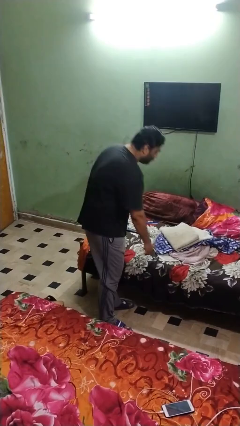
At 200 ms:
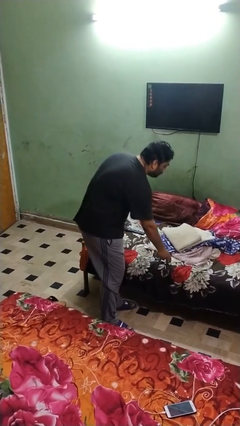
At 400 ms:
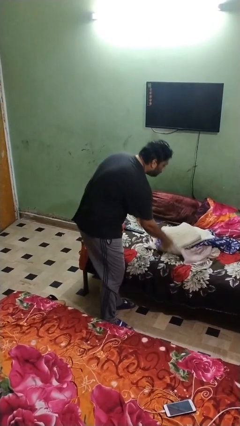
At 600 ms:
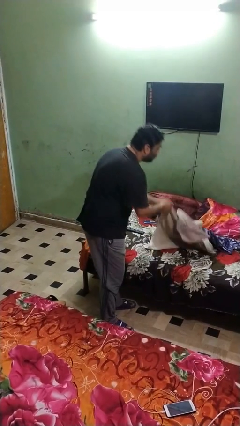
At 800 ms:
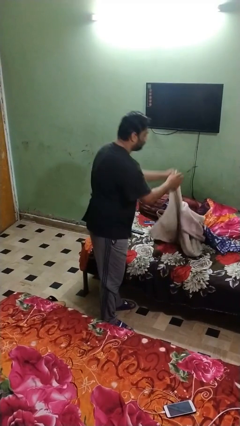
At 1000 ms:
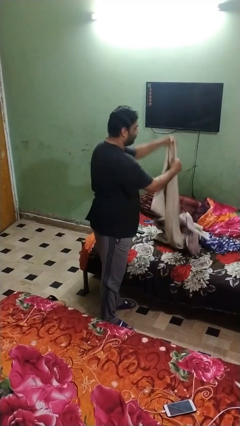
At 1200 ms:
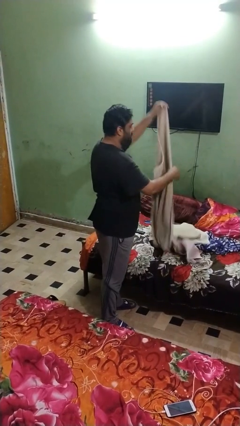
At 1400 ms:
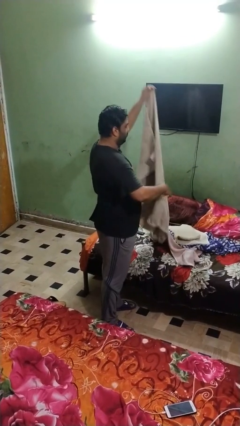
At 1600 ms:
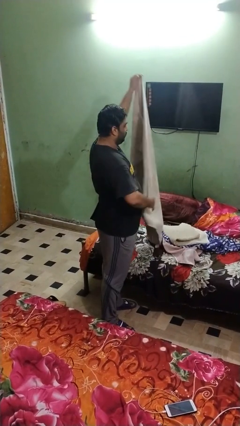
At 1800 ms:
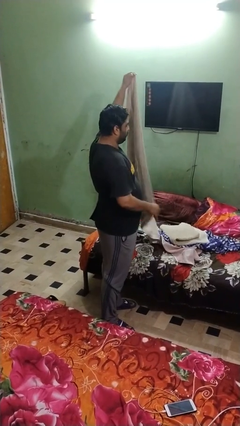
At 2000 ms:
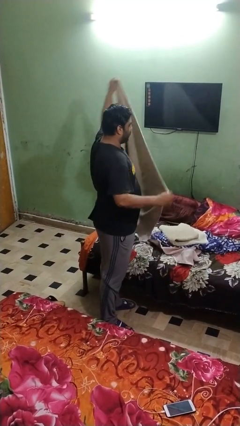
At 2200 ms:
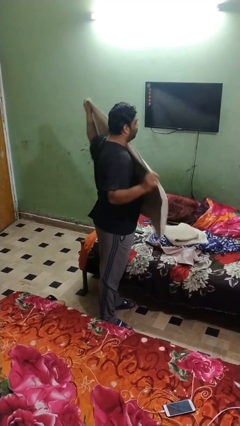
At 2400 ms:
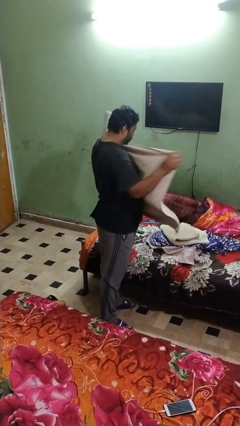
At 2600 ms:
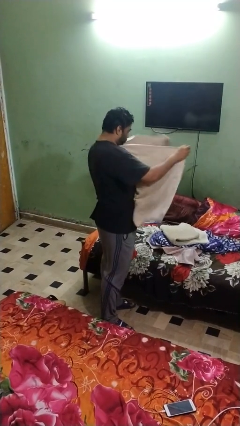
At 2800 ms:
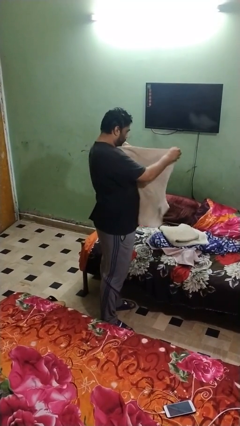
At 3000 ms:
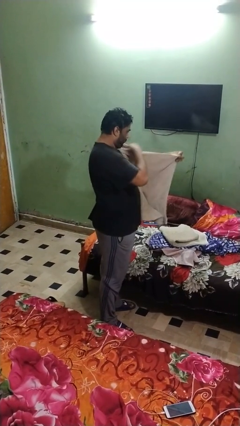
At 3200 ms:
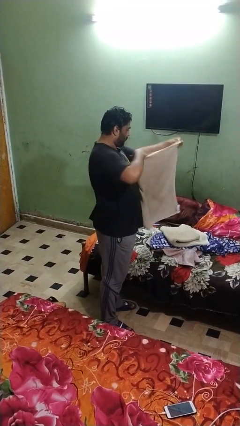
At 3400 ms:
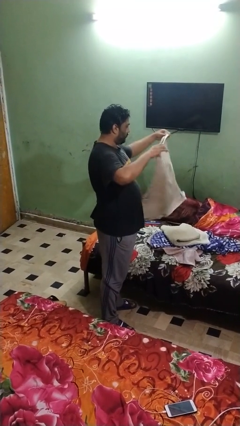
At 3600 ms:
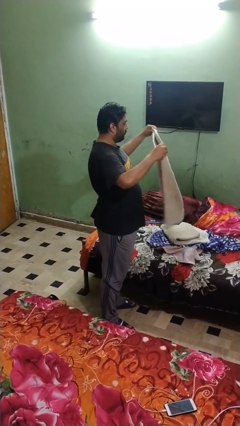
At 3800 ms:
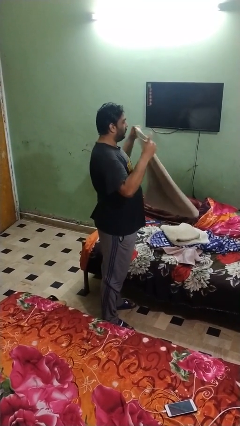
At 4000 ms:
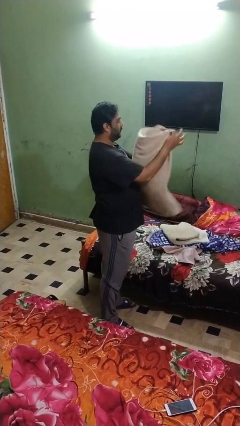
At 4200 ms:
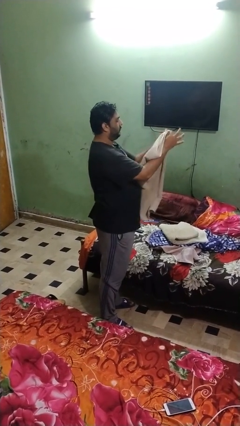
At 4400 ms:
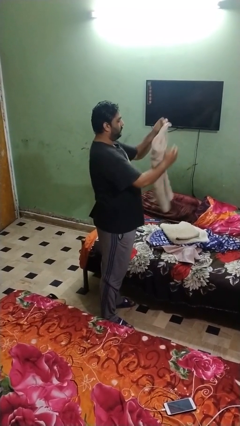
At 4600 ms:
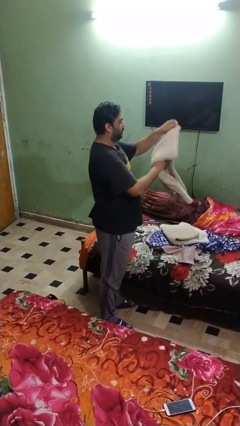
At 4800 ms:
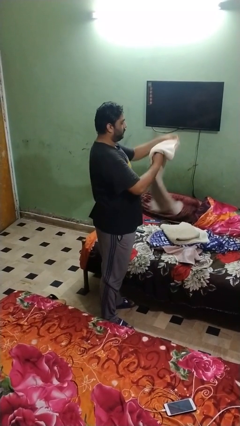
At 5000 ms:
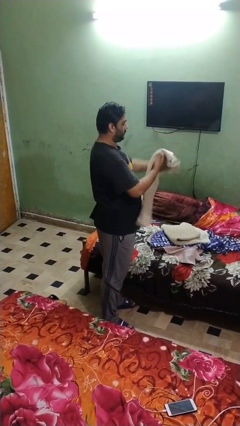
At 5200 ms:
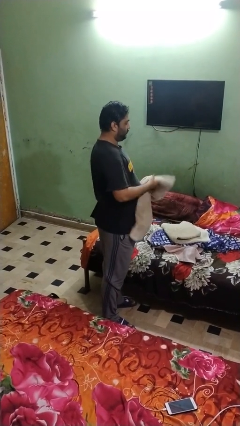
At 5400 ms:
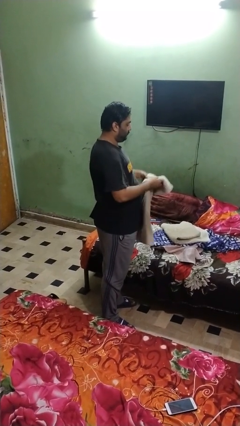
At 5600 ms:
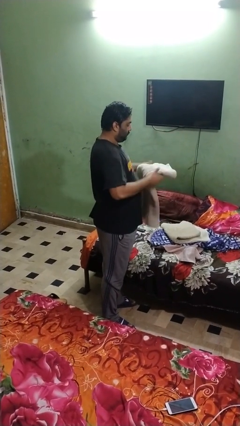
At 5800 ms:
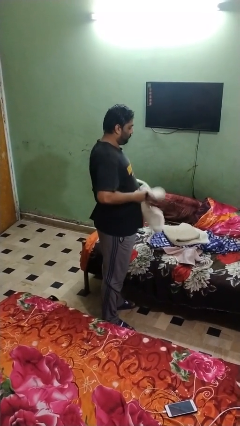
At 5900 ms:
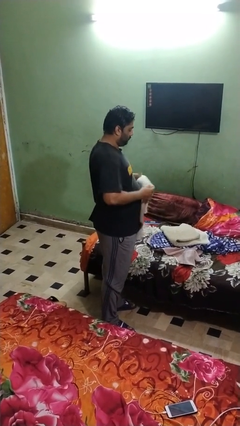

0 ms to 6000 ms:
person folds towel

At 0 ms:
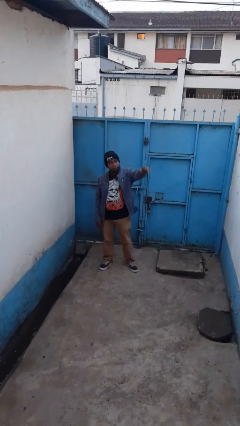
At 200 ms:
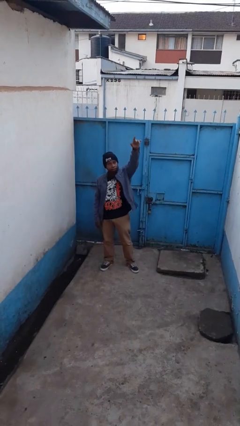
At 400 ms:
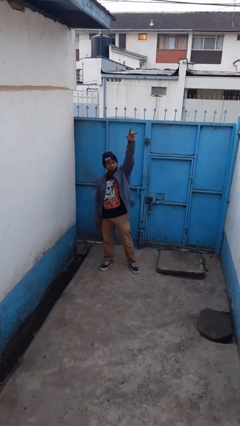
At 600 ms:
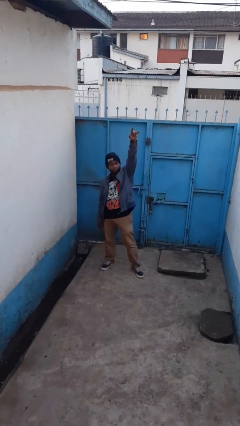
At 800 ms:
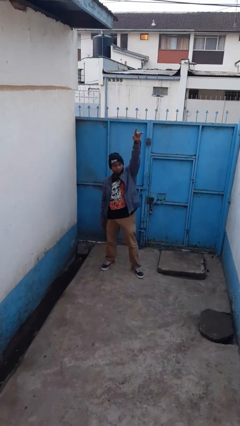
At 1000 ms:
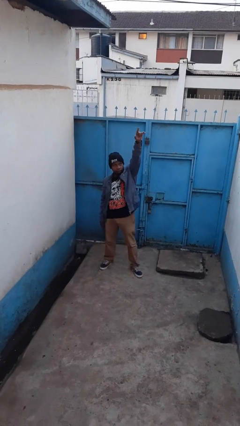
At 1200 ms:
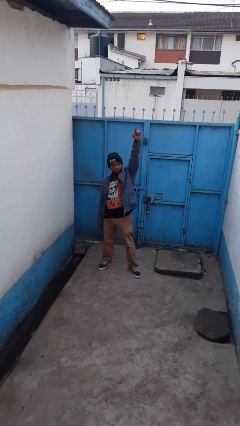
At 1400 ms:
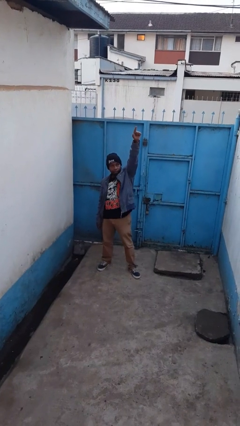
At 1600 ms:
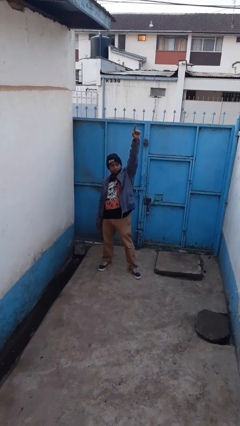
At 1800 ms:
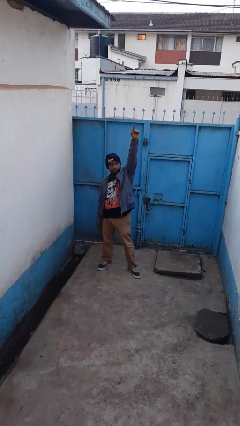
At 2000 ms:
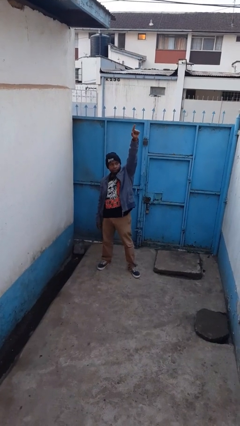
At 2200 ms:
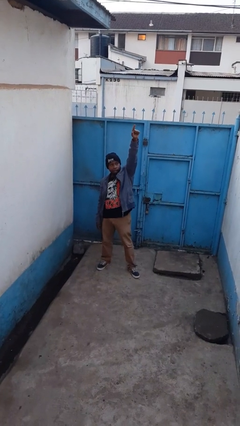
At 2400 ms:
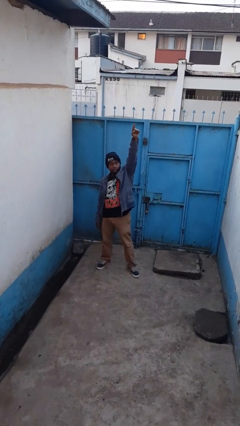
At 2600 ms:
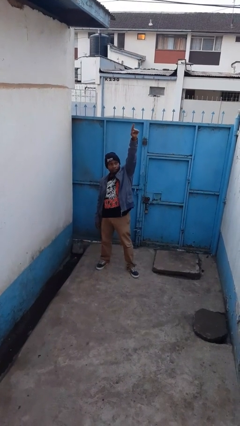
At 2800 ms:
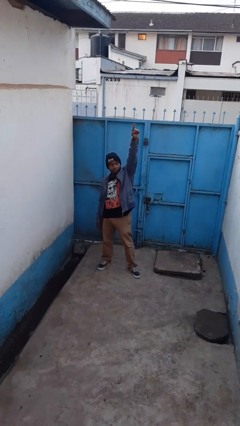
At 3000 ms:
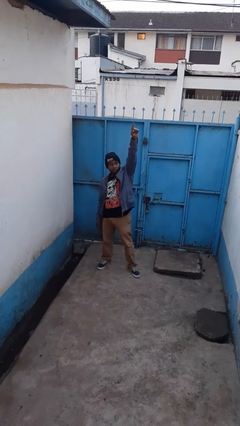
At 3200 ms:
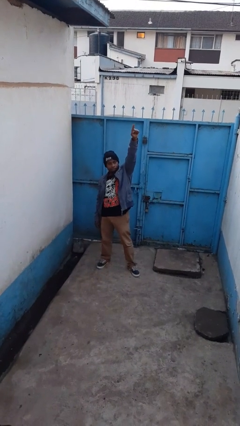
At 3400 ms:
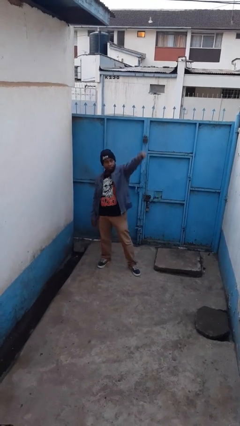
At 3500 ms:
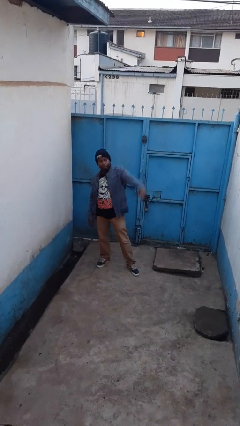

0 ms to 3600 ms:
person points at person

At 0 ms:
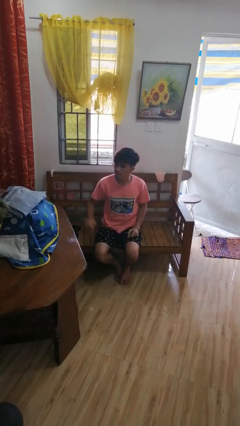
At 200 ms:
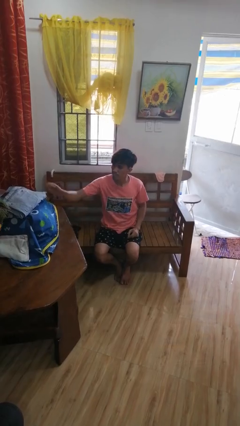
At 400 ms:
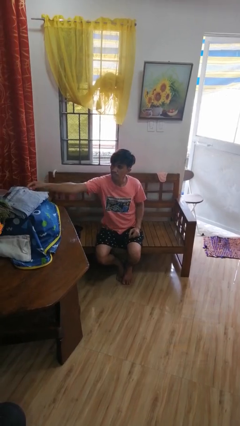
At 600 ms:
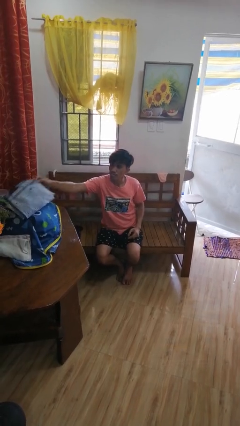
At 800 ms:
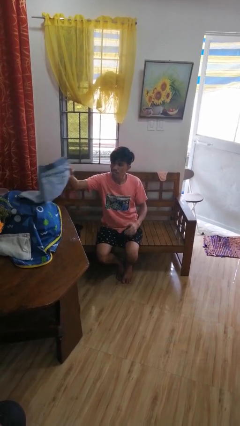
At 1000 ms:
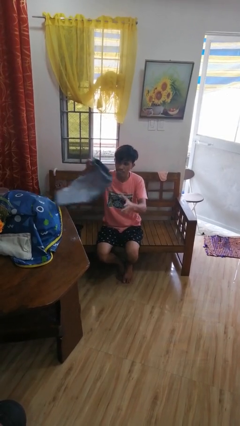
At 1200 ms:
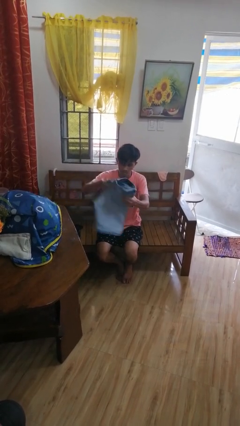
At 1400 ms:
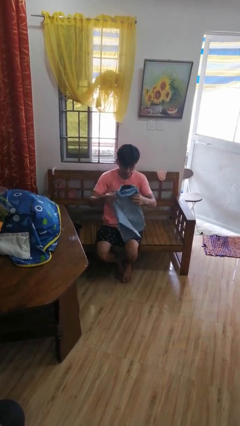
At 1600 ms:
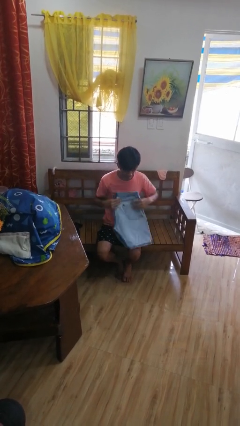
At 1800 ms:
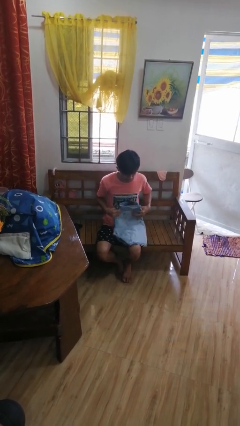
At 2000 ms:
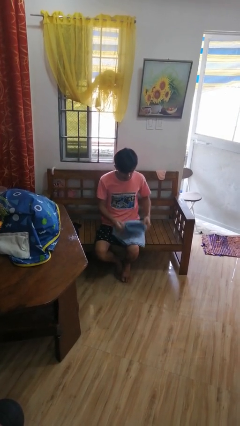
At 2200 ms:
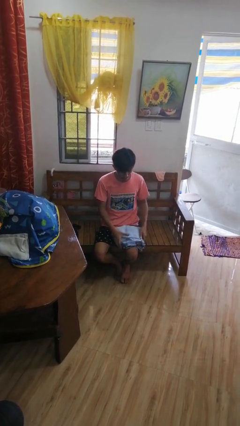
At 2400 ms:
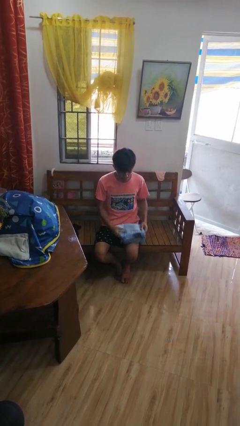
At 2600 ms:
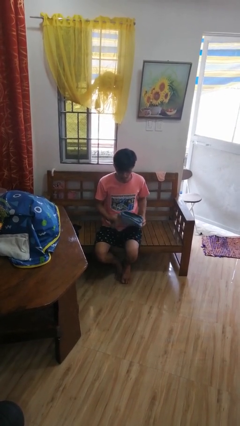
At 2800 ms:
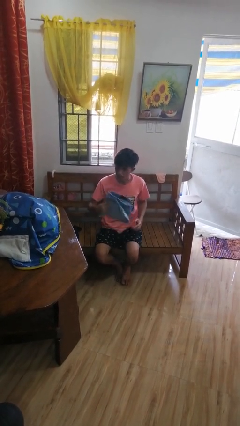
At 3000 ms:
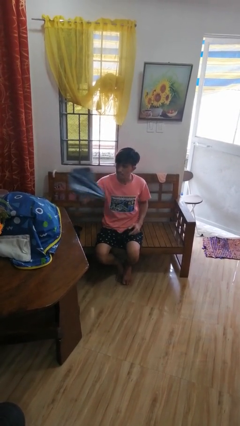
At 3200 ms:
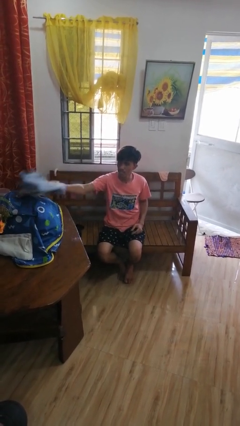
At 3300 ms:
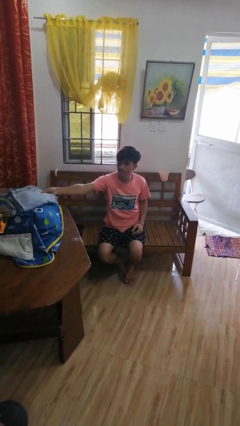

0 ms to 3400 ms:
person folds pants

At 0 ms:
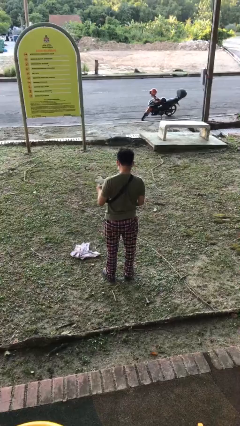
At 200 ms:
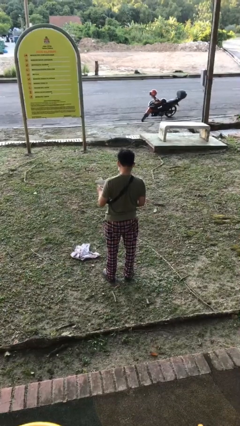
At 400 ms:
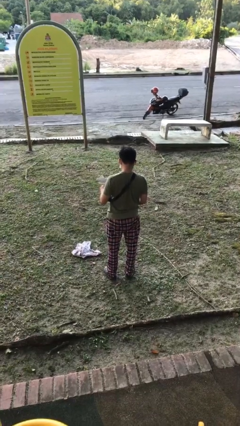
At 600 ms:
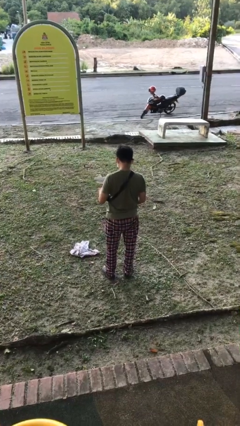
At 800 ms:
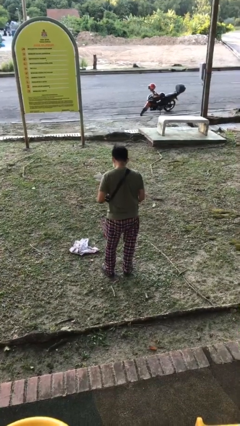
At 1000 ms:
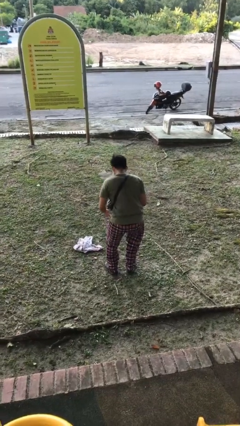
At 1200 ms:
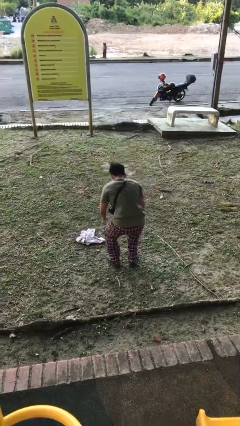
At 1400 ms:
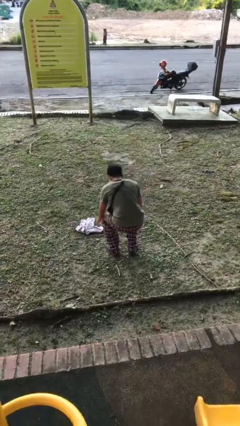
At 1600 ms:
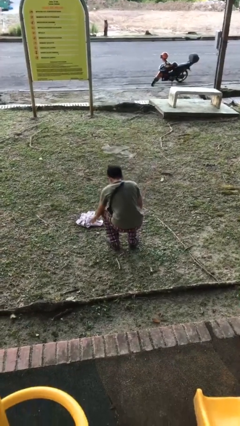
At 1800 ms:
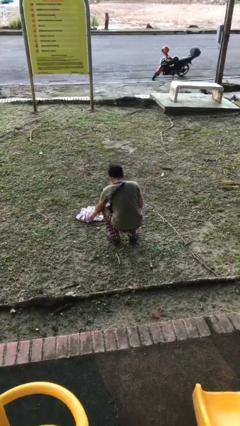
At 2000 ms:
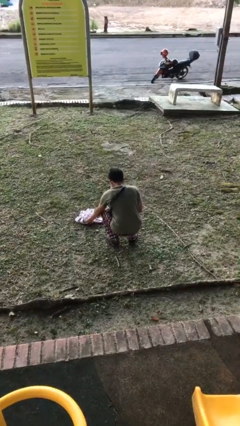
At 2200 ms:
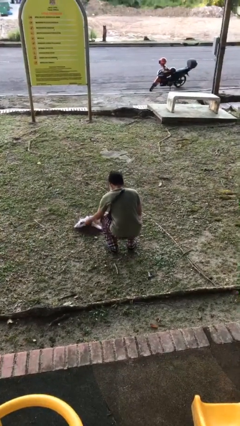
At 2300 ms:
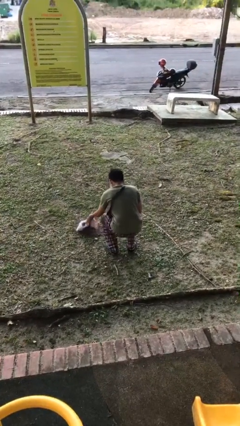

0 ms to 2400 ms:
person picks up object from floor

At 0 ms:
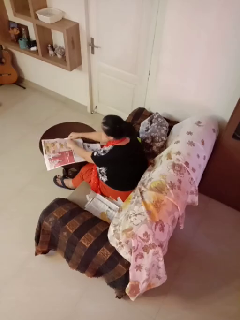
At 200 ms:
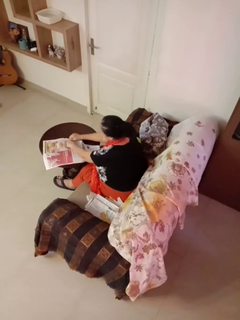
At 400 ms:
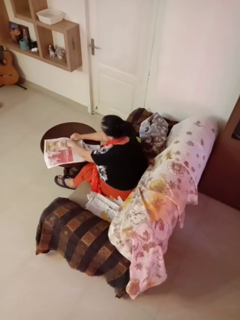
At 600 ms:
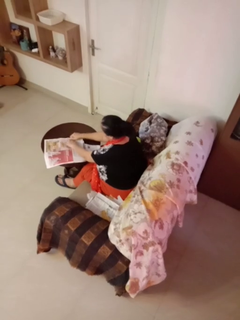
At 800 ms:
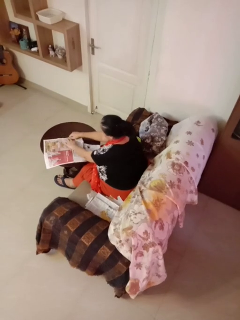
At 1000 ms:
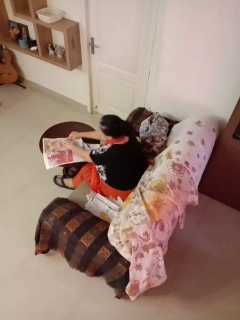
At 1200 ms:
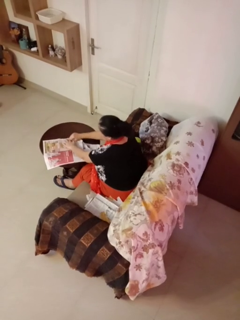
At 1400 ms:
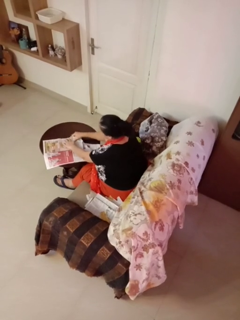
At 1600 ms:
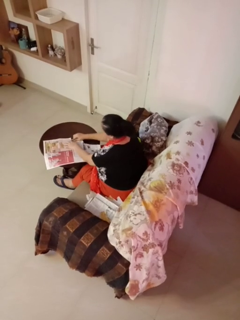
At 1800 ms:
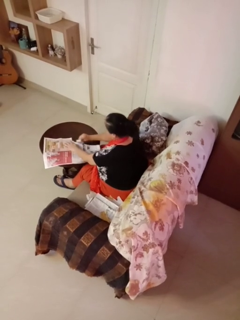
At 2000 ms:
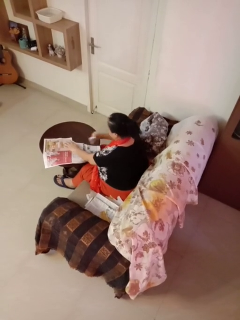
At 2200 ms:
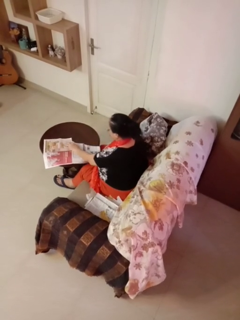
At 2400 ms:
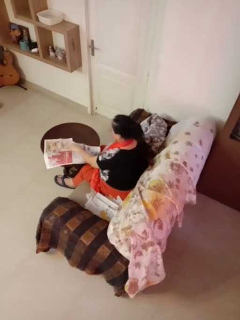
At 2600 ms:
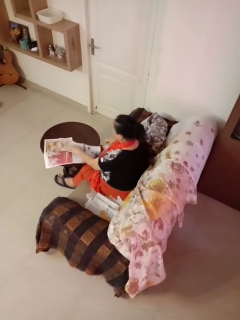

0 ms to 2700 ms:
person tears paper

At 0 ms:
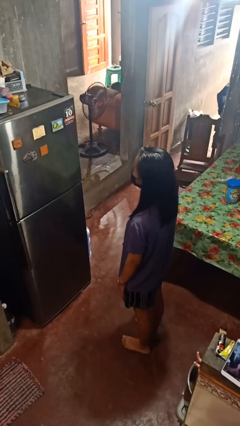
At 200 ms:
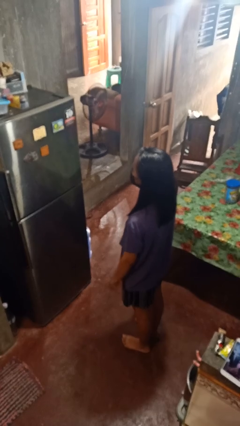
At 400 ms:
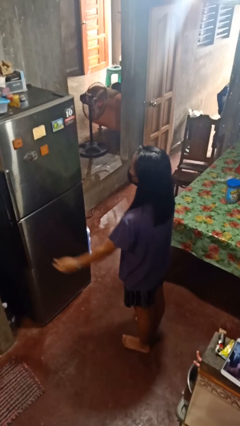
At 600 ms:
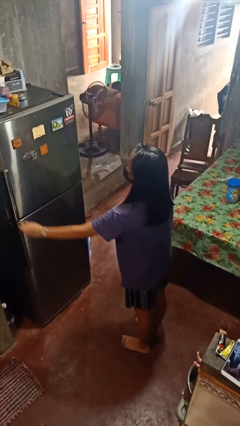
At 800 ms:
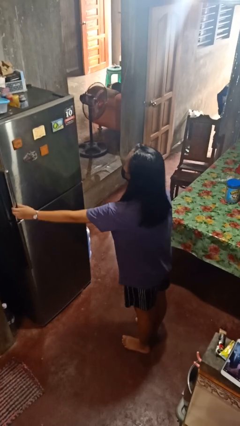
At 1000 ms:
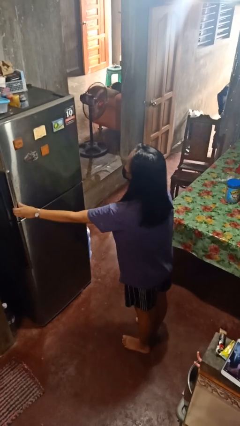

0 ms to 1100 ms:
person opens refrigerator
